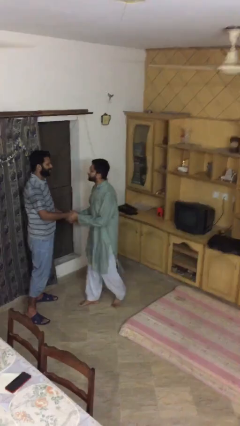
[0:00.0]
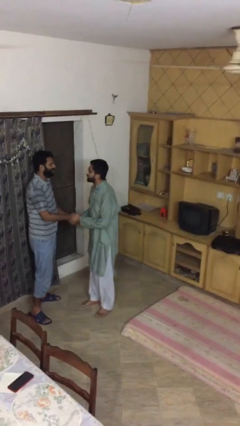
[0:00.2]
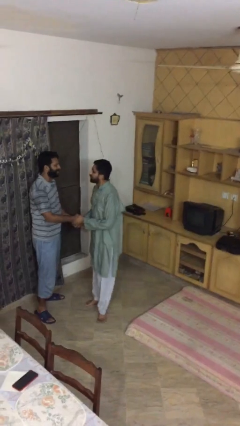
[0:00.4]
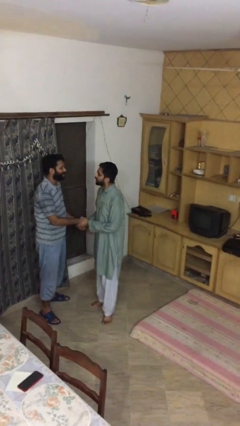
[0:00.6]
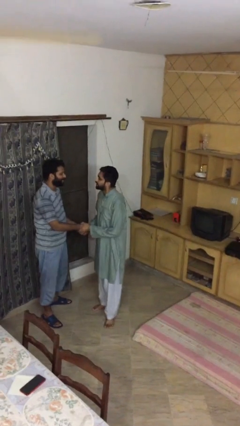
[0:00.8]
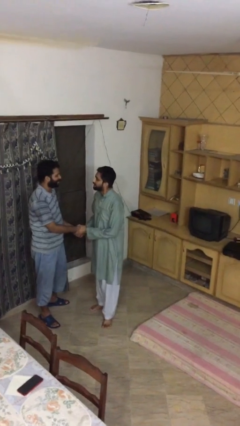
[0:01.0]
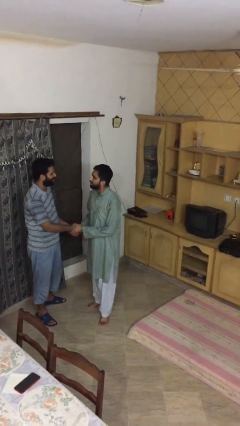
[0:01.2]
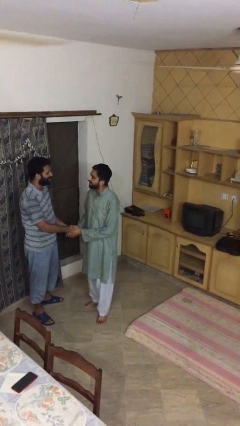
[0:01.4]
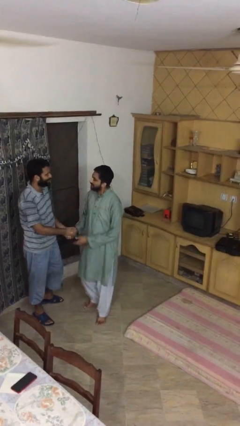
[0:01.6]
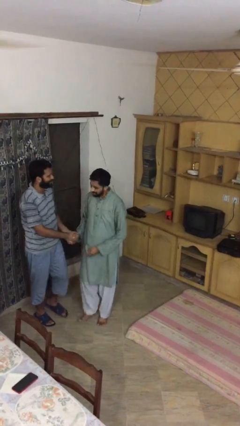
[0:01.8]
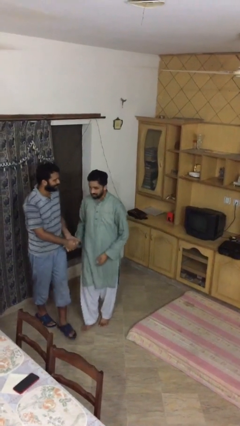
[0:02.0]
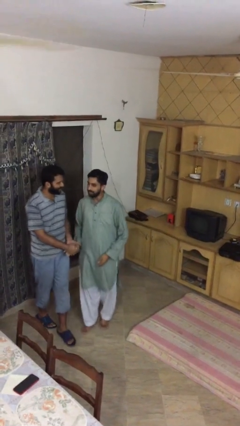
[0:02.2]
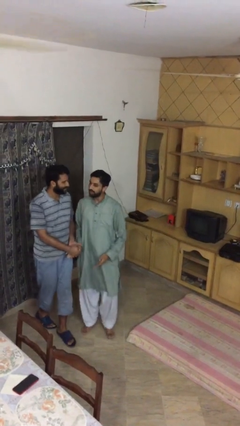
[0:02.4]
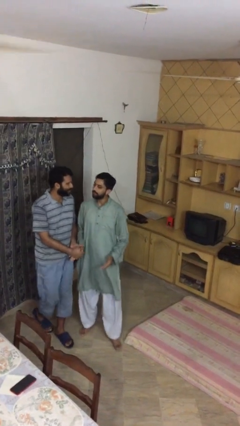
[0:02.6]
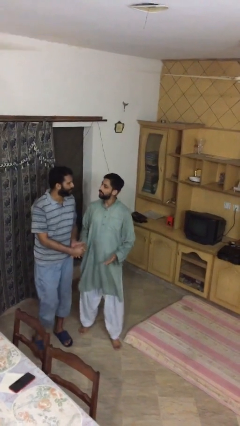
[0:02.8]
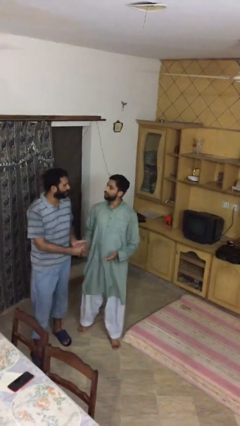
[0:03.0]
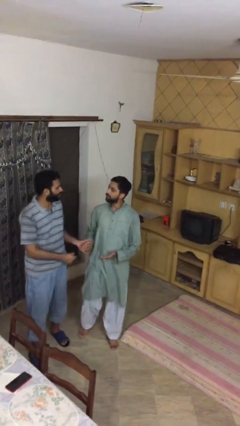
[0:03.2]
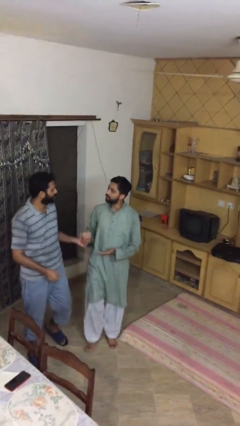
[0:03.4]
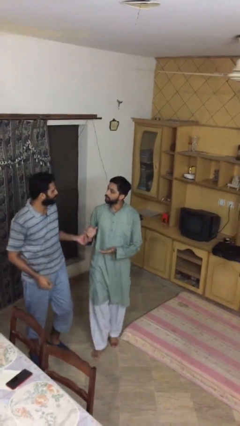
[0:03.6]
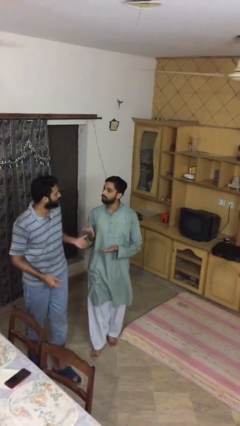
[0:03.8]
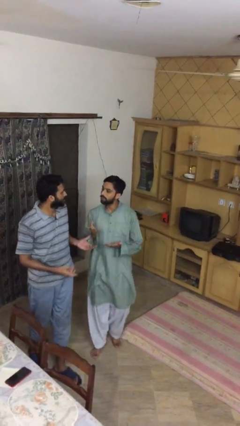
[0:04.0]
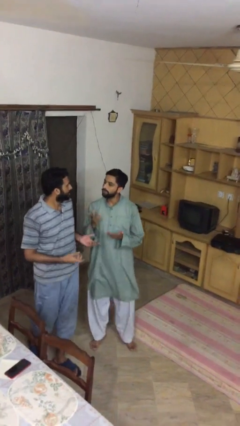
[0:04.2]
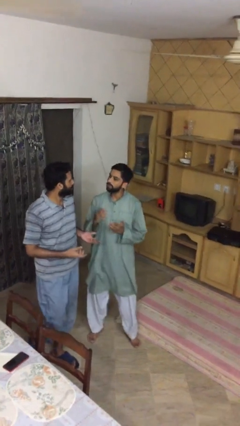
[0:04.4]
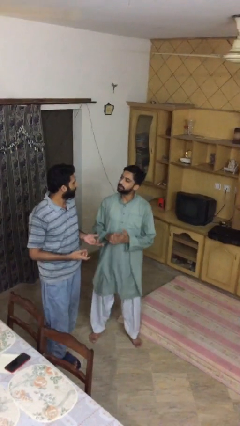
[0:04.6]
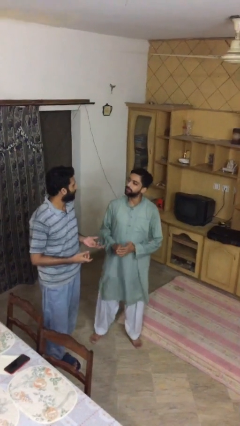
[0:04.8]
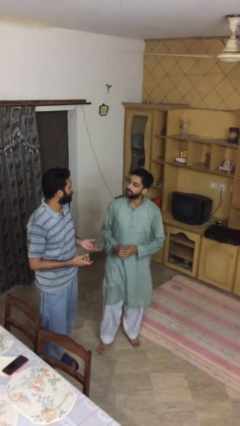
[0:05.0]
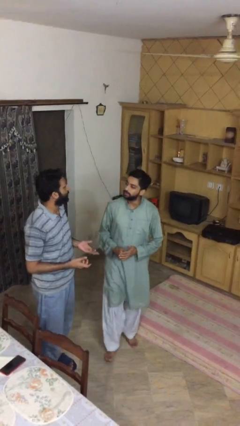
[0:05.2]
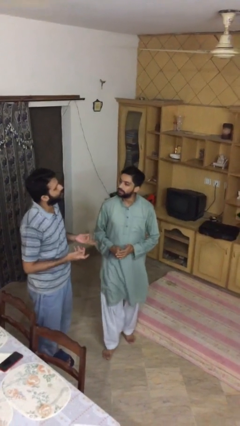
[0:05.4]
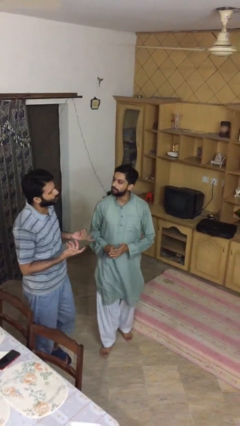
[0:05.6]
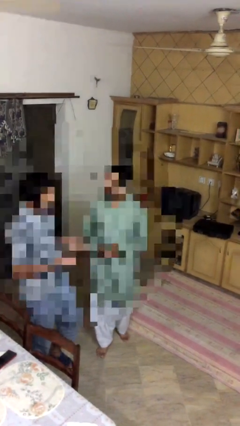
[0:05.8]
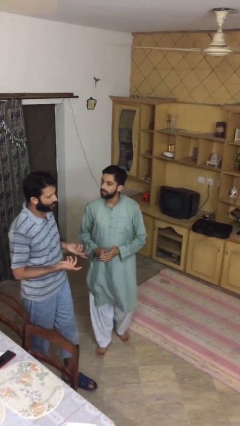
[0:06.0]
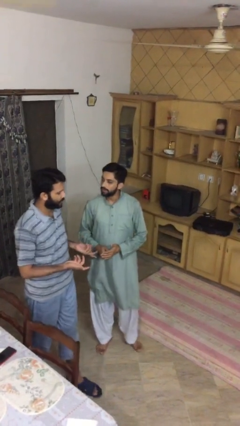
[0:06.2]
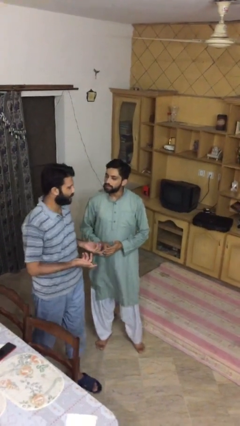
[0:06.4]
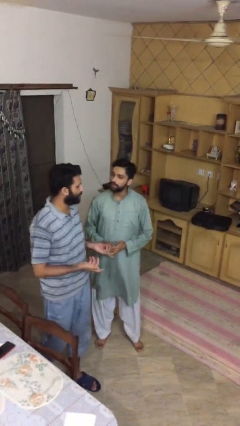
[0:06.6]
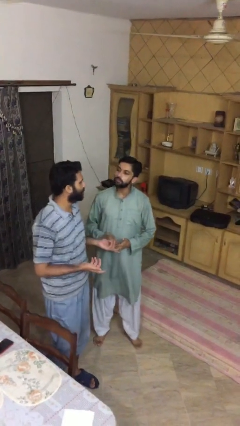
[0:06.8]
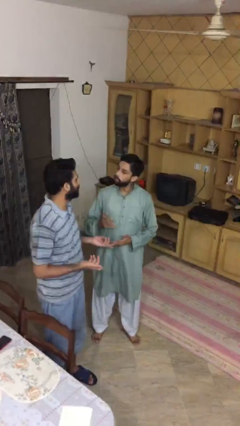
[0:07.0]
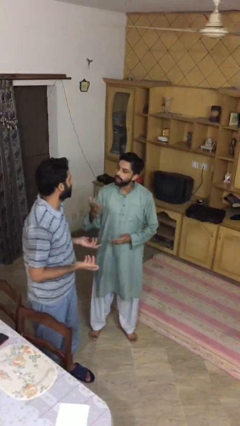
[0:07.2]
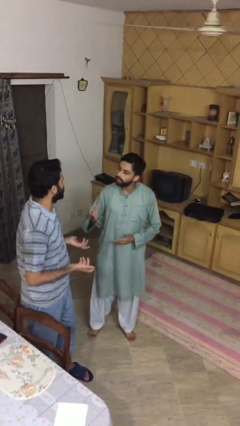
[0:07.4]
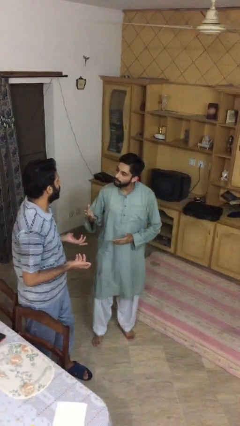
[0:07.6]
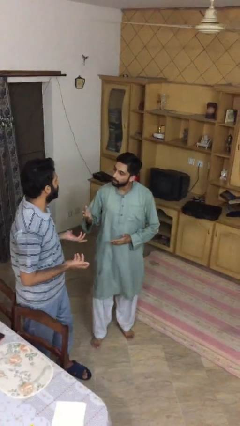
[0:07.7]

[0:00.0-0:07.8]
person talks to person

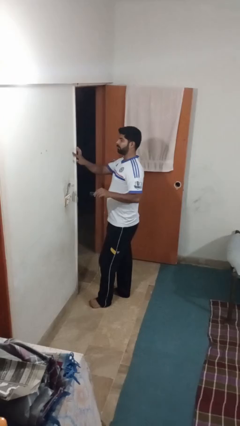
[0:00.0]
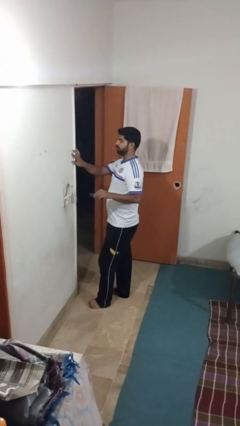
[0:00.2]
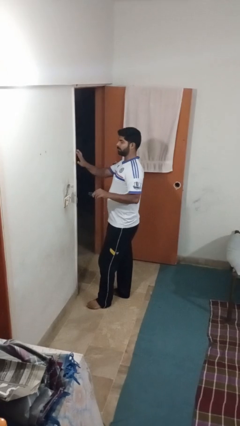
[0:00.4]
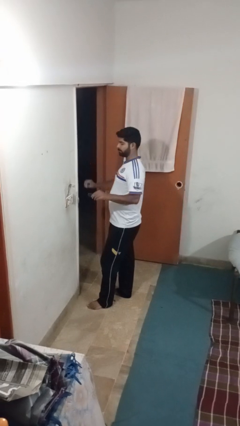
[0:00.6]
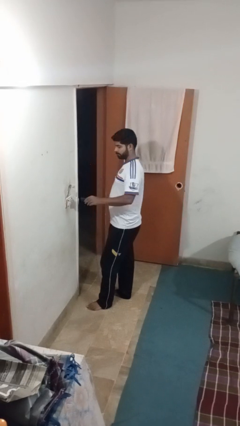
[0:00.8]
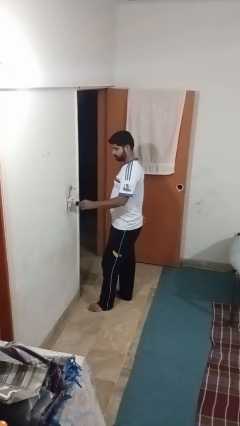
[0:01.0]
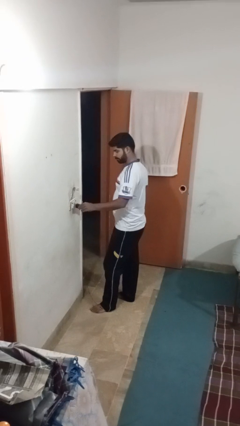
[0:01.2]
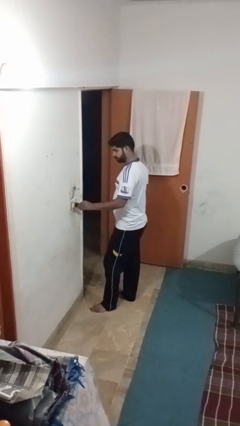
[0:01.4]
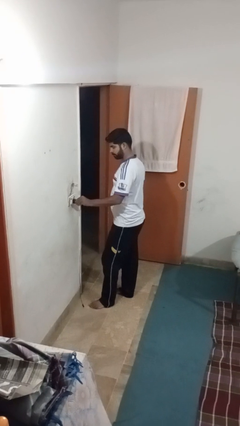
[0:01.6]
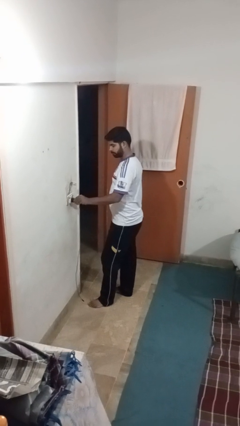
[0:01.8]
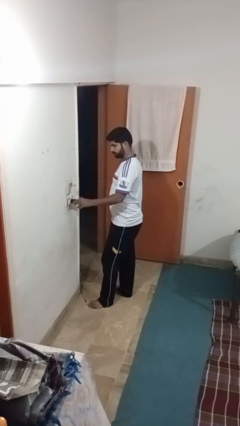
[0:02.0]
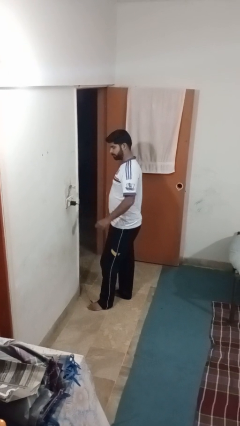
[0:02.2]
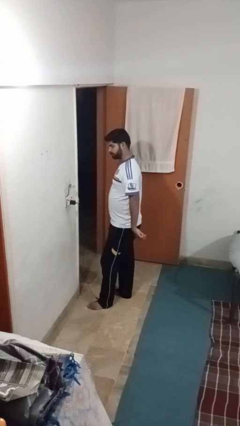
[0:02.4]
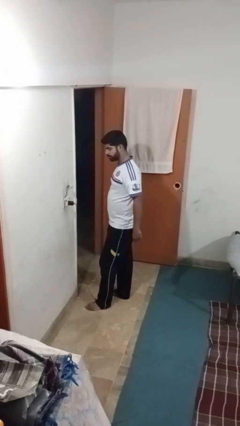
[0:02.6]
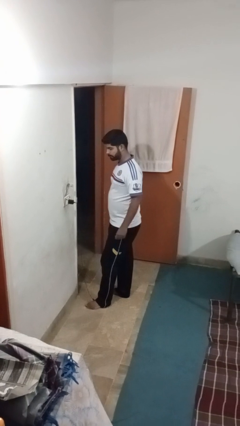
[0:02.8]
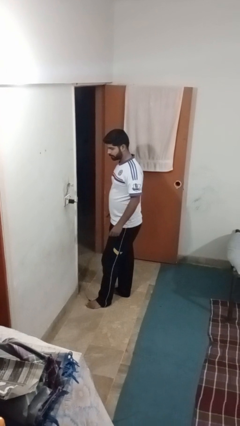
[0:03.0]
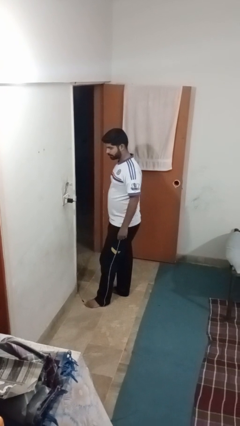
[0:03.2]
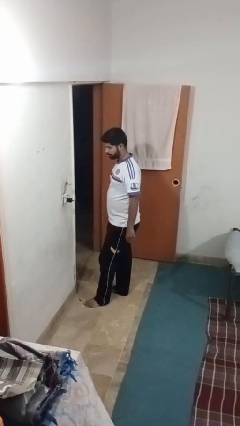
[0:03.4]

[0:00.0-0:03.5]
person plugs into electrical socket

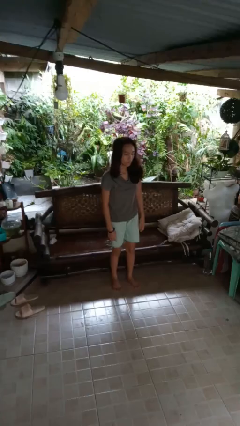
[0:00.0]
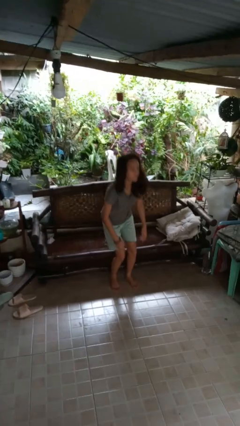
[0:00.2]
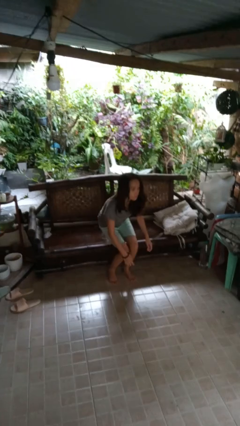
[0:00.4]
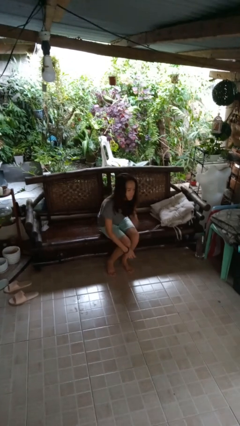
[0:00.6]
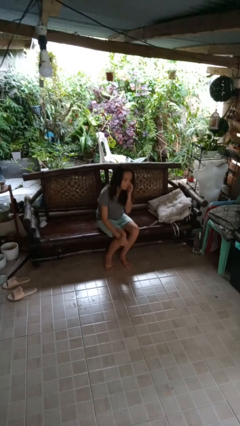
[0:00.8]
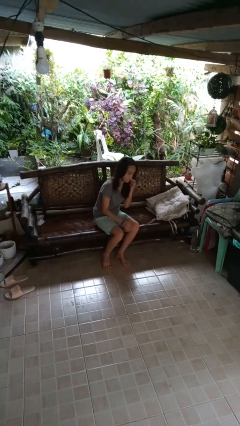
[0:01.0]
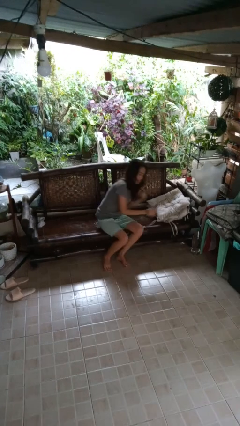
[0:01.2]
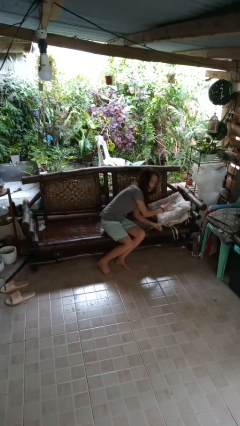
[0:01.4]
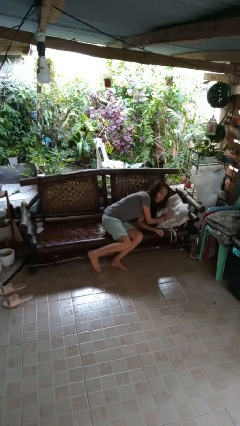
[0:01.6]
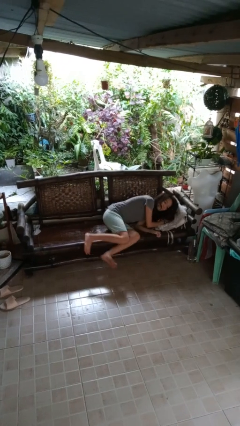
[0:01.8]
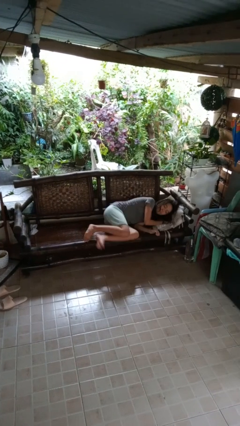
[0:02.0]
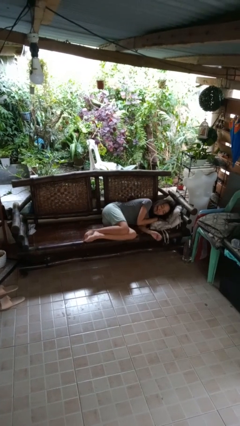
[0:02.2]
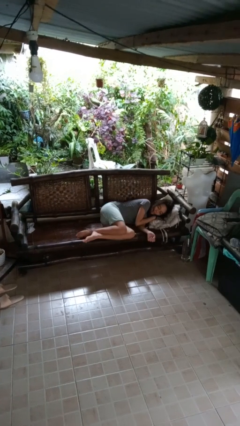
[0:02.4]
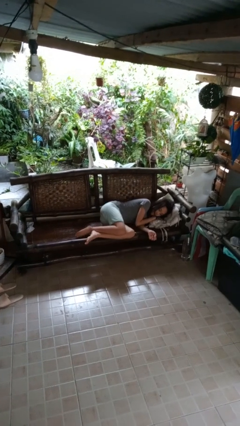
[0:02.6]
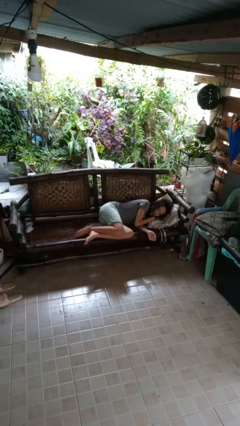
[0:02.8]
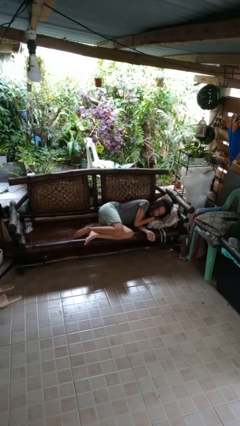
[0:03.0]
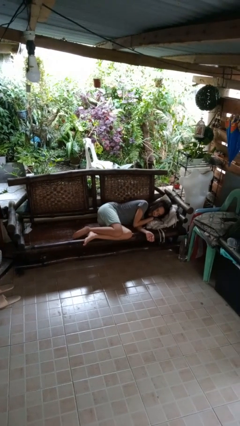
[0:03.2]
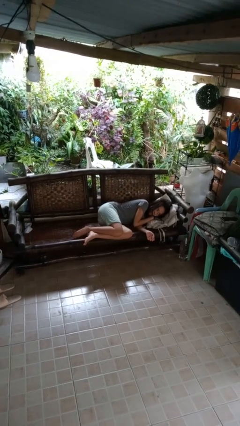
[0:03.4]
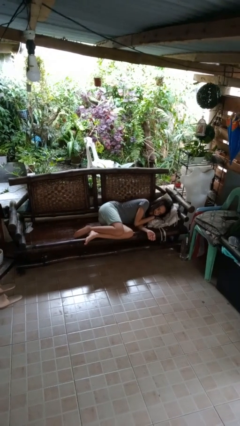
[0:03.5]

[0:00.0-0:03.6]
person lies down on couch

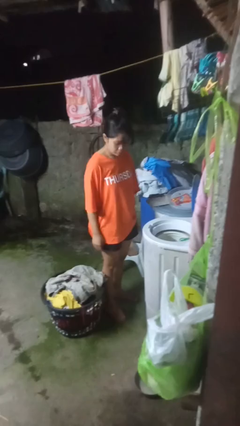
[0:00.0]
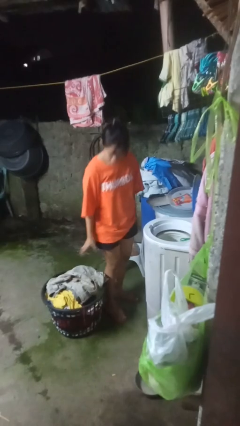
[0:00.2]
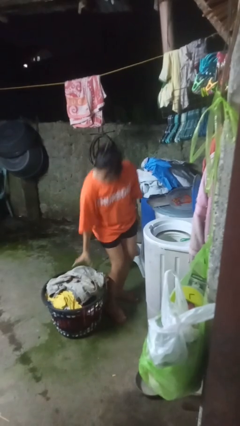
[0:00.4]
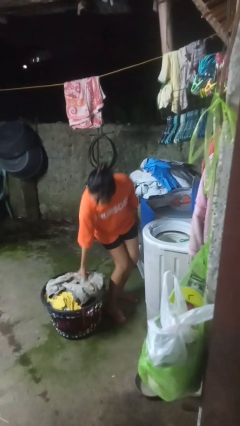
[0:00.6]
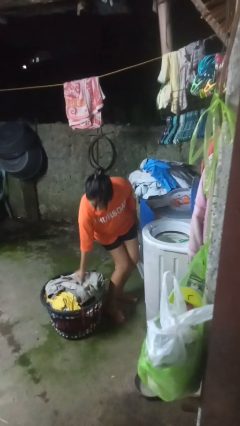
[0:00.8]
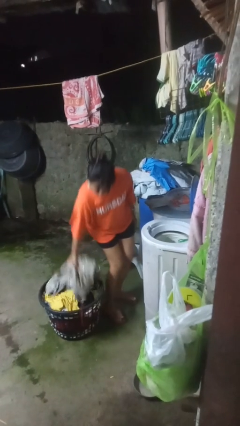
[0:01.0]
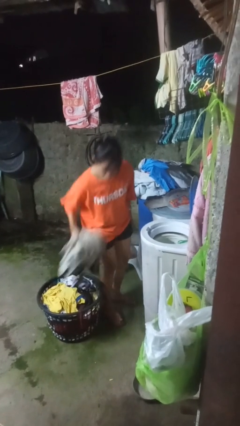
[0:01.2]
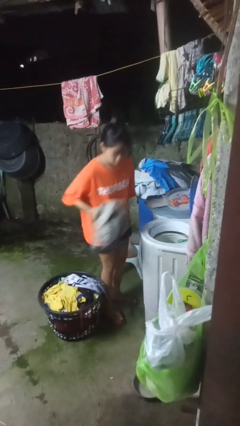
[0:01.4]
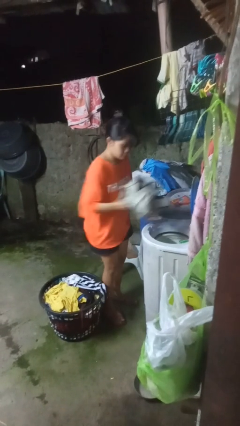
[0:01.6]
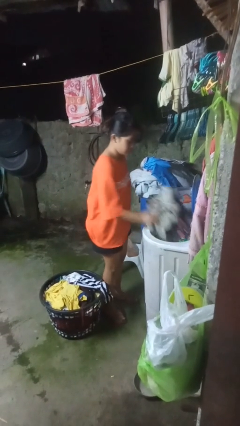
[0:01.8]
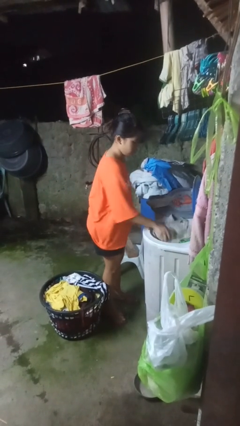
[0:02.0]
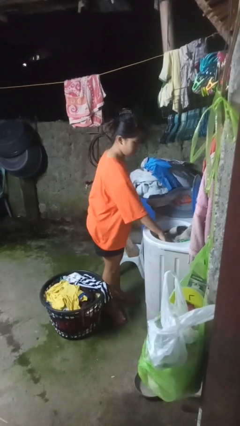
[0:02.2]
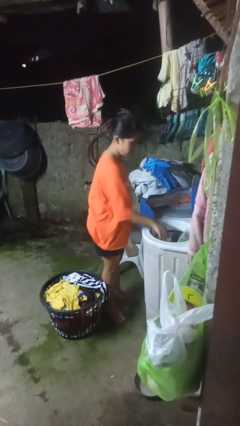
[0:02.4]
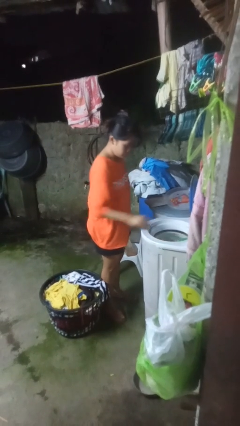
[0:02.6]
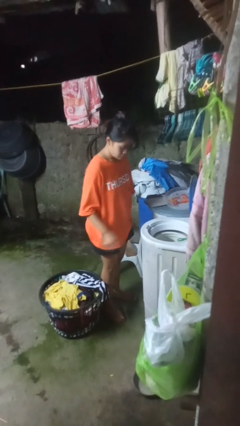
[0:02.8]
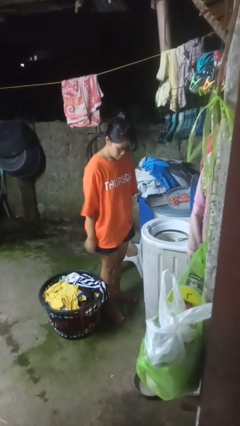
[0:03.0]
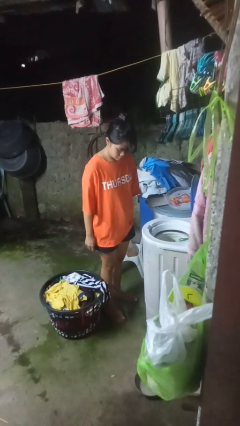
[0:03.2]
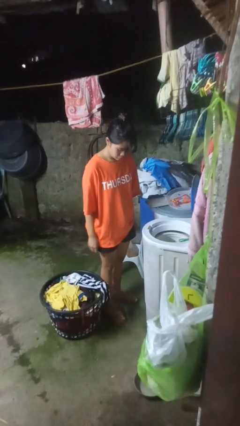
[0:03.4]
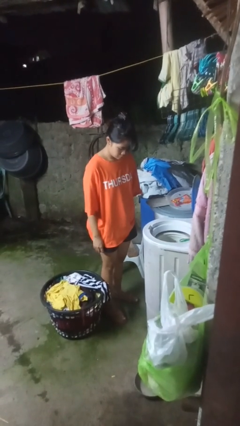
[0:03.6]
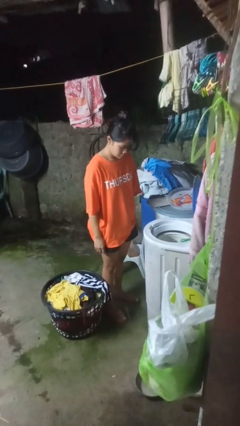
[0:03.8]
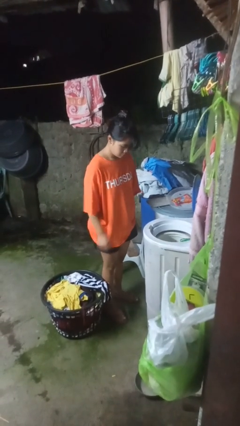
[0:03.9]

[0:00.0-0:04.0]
person loads dryer
